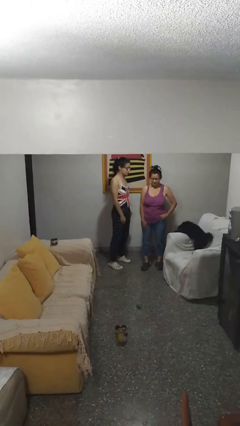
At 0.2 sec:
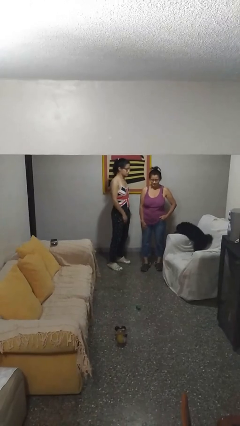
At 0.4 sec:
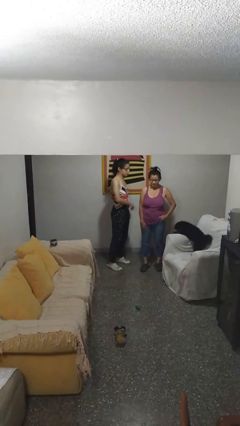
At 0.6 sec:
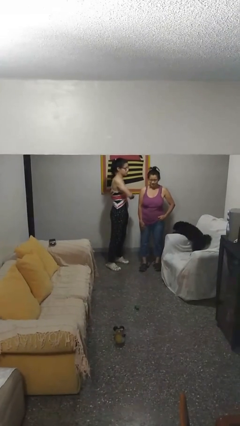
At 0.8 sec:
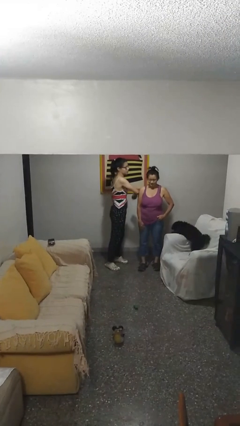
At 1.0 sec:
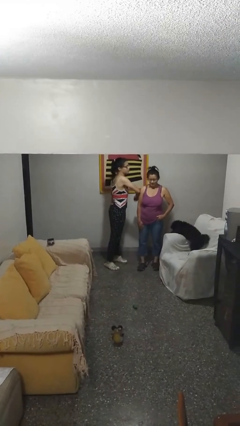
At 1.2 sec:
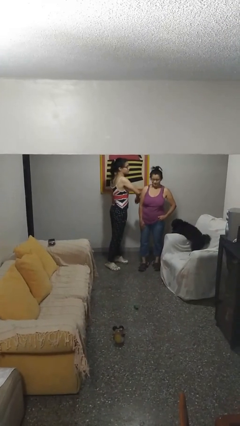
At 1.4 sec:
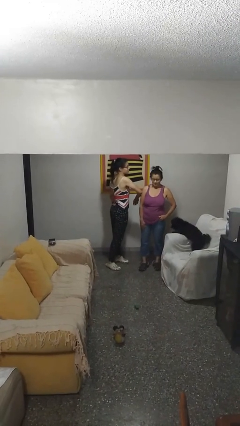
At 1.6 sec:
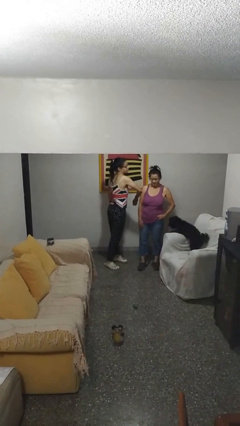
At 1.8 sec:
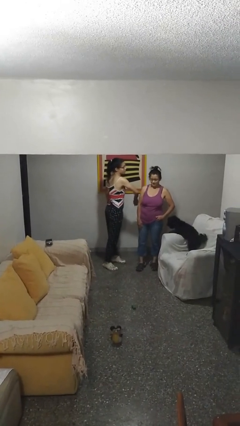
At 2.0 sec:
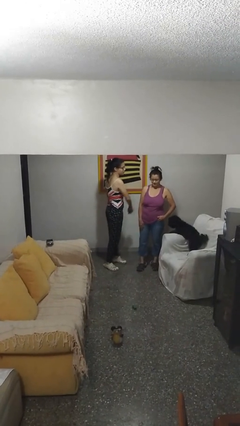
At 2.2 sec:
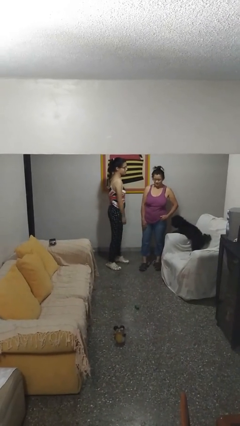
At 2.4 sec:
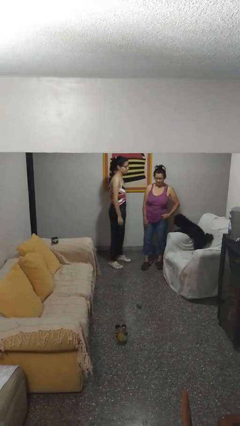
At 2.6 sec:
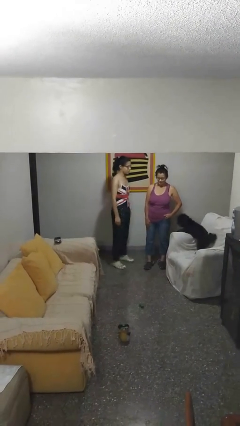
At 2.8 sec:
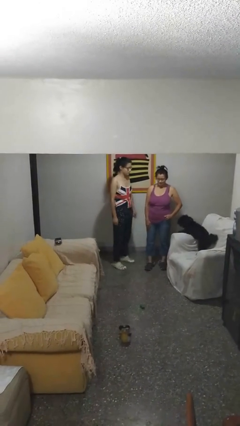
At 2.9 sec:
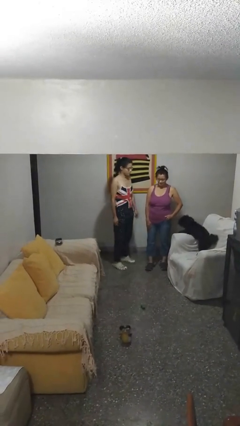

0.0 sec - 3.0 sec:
person nudges person with elbow

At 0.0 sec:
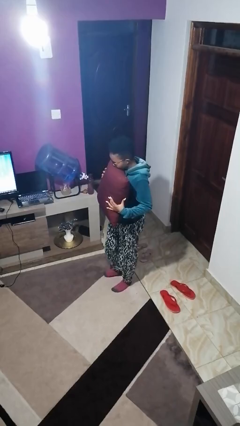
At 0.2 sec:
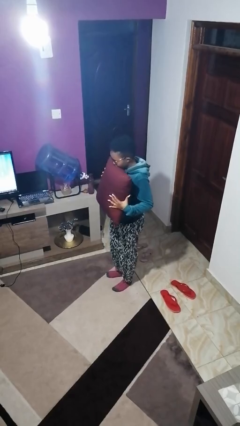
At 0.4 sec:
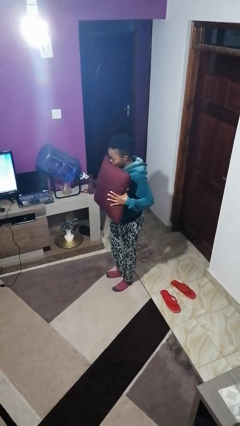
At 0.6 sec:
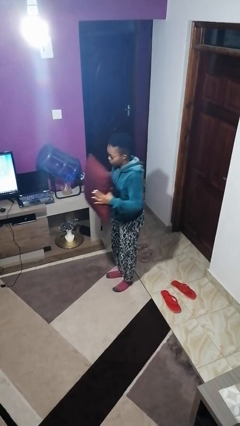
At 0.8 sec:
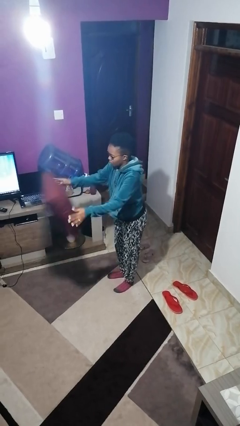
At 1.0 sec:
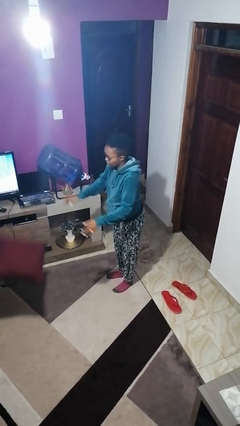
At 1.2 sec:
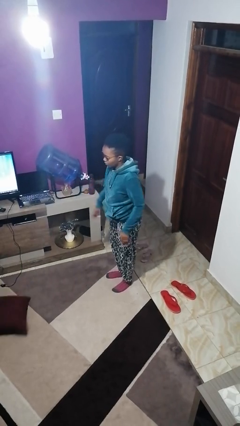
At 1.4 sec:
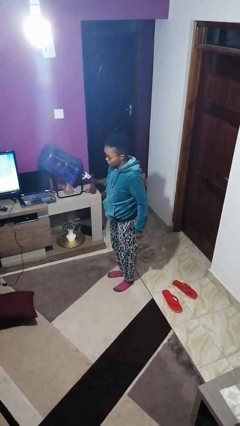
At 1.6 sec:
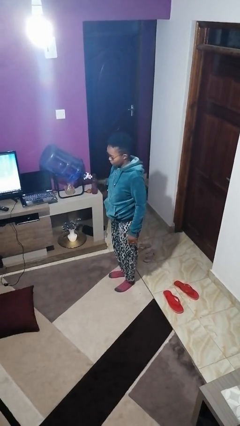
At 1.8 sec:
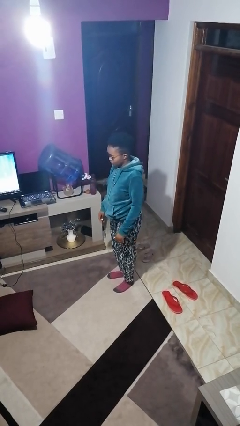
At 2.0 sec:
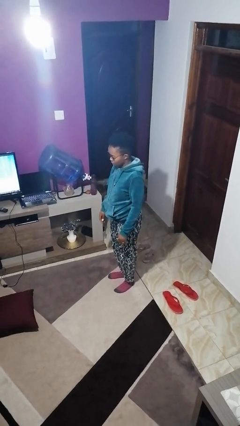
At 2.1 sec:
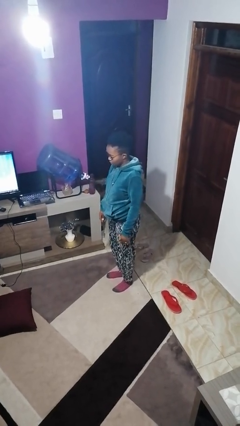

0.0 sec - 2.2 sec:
person throws object to ground

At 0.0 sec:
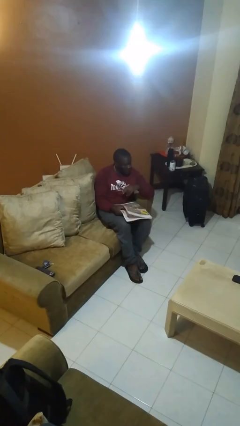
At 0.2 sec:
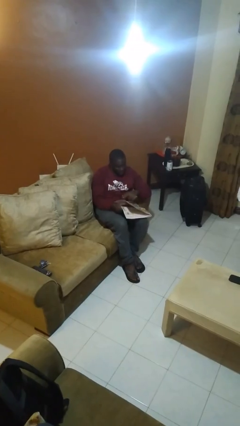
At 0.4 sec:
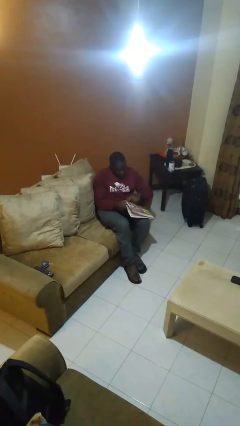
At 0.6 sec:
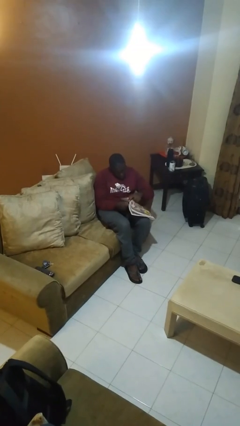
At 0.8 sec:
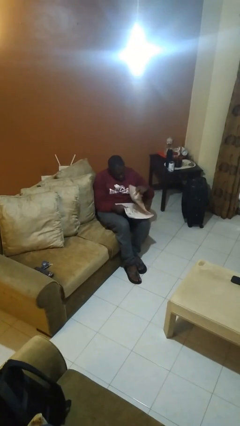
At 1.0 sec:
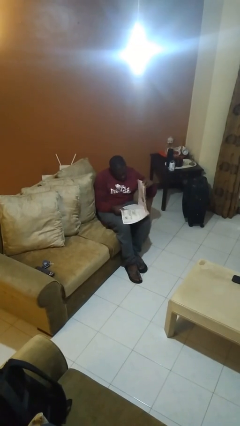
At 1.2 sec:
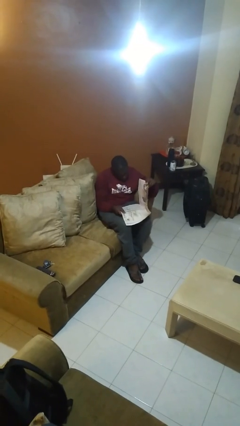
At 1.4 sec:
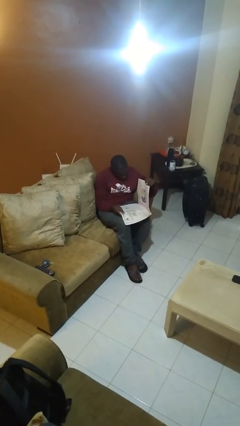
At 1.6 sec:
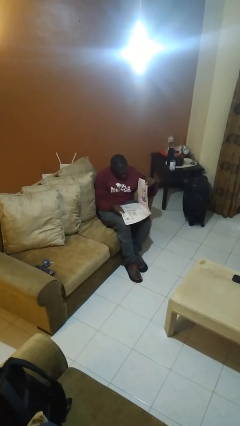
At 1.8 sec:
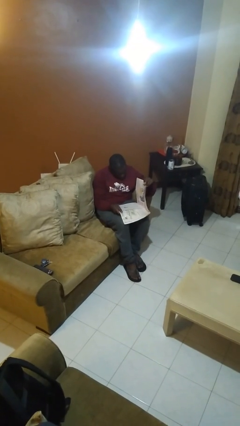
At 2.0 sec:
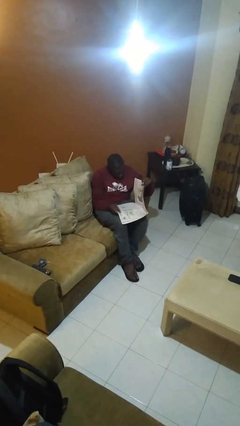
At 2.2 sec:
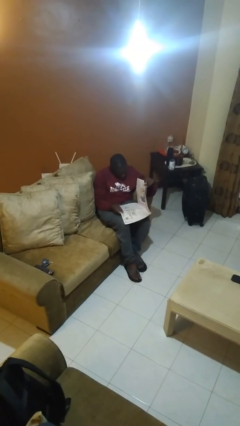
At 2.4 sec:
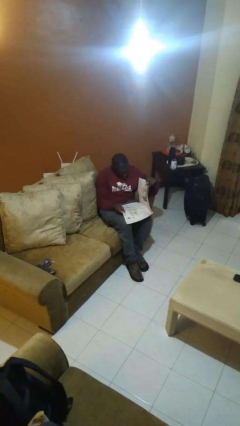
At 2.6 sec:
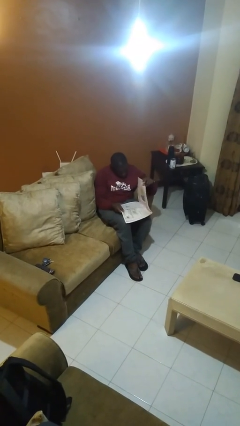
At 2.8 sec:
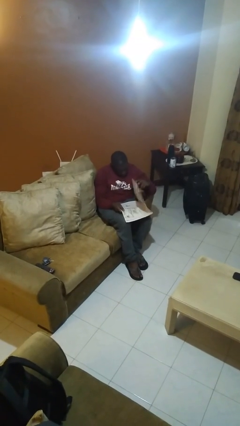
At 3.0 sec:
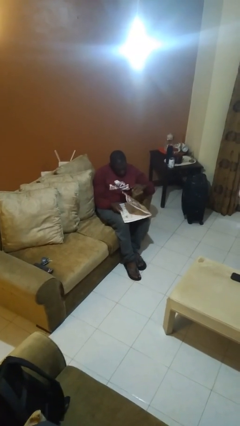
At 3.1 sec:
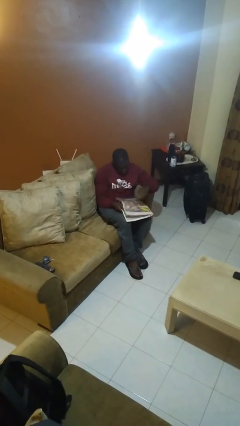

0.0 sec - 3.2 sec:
person reads newspaper

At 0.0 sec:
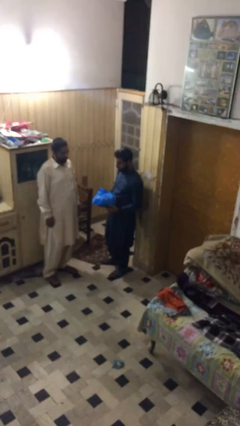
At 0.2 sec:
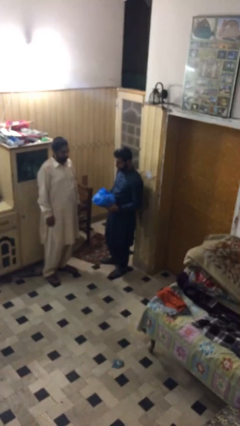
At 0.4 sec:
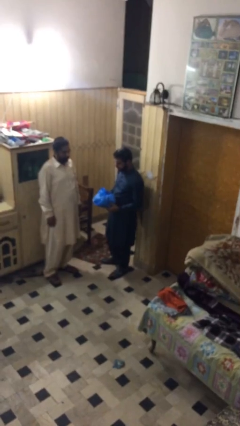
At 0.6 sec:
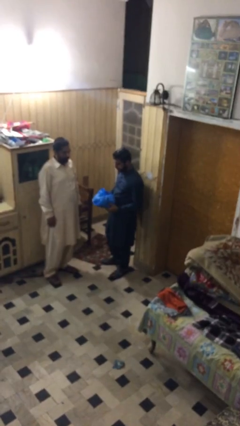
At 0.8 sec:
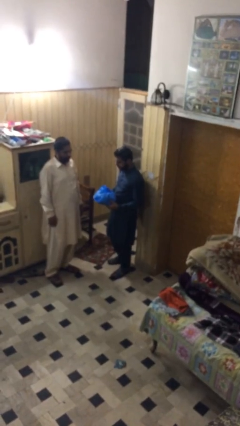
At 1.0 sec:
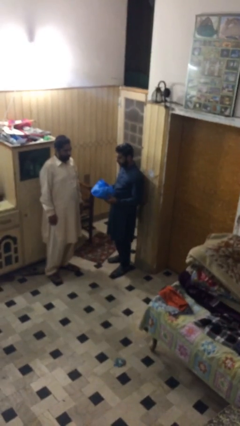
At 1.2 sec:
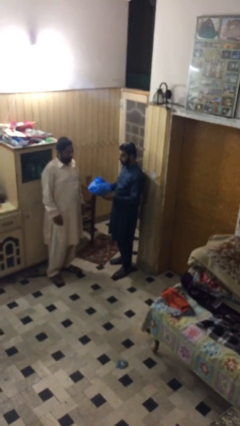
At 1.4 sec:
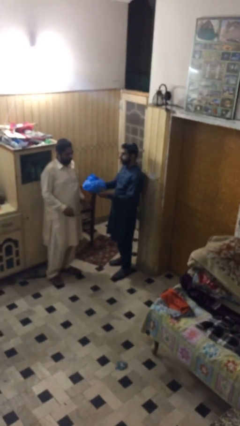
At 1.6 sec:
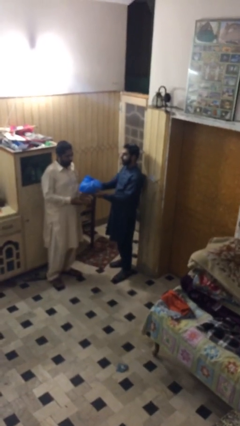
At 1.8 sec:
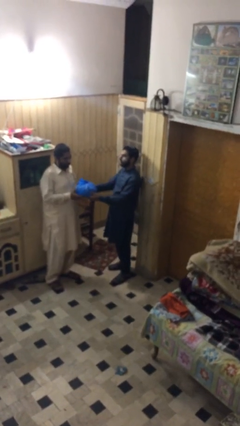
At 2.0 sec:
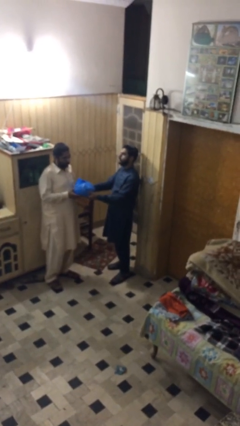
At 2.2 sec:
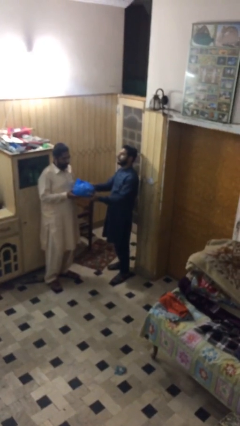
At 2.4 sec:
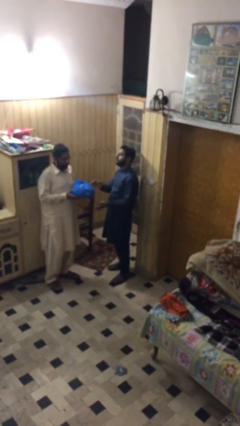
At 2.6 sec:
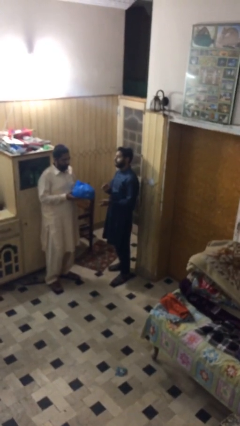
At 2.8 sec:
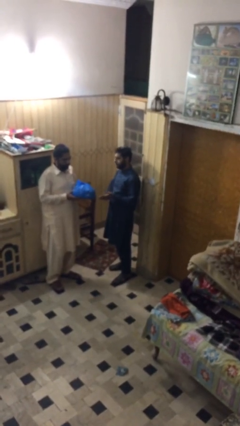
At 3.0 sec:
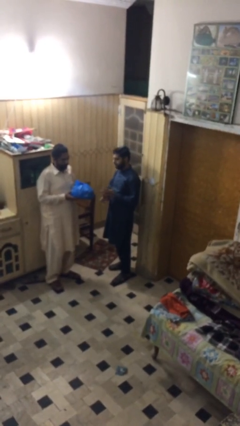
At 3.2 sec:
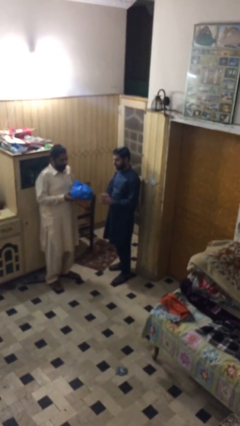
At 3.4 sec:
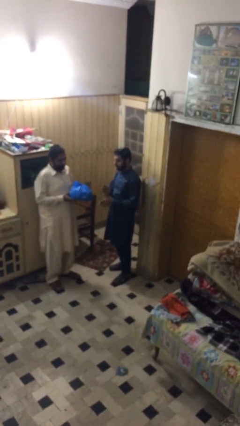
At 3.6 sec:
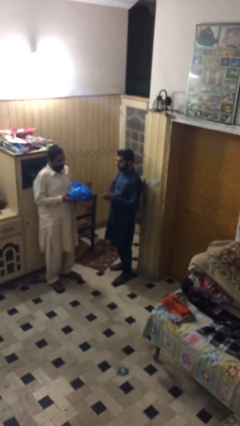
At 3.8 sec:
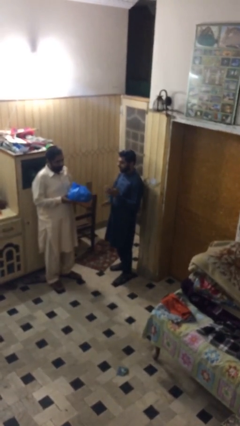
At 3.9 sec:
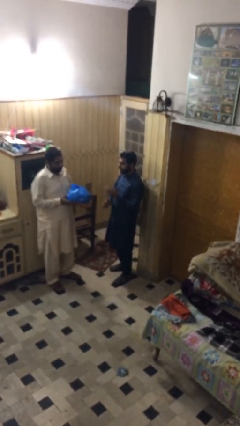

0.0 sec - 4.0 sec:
person transfers object to person

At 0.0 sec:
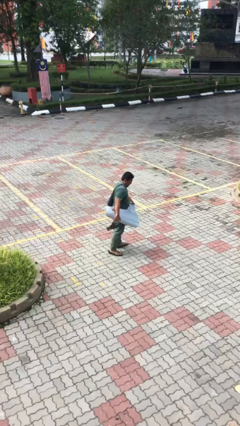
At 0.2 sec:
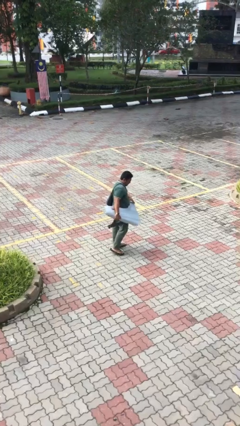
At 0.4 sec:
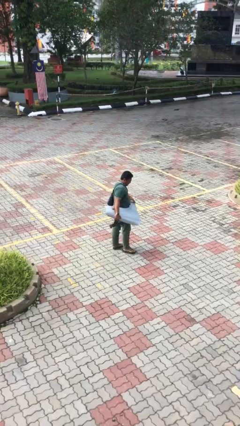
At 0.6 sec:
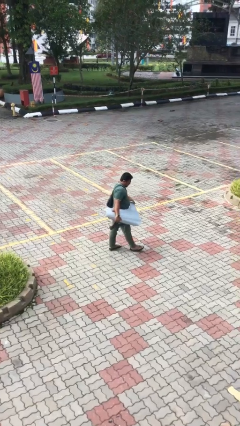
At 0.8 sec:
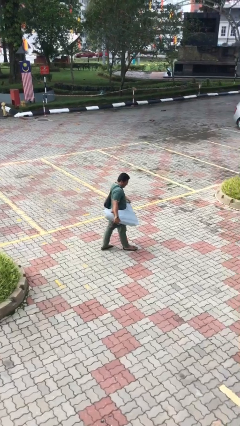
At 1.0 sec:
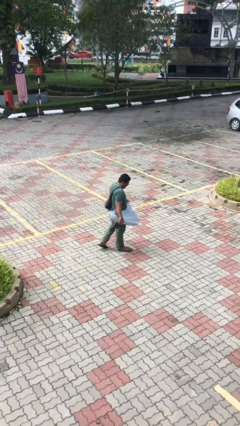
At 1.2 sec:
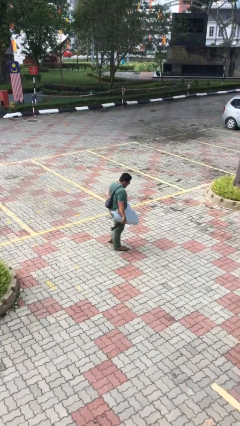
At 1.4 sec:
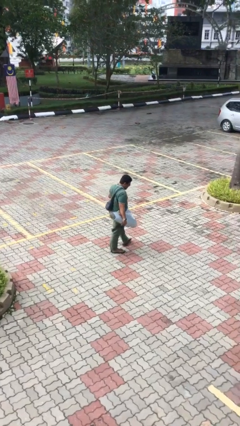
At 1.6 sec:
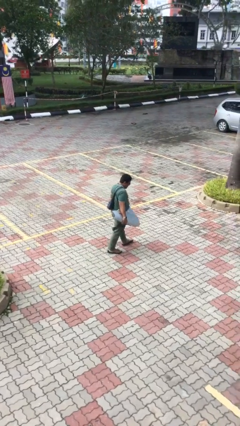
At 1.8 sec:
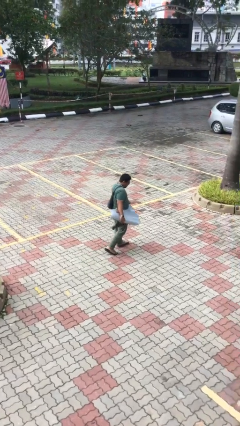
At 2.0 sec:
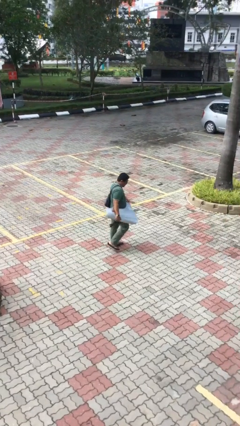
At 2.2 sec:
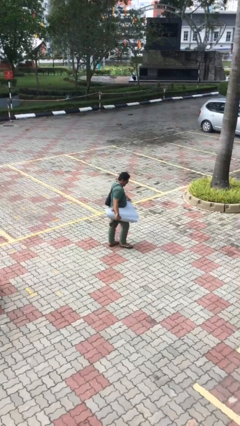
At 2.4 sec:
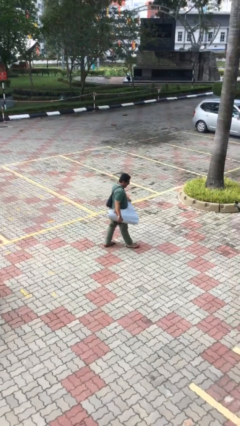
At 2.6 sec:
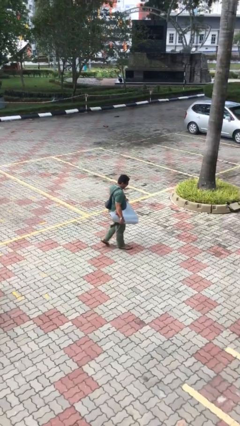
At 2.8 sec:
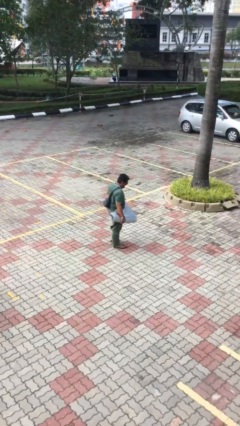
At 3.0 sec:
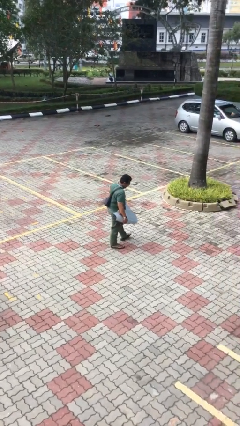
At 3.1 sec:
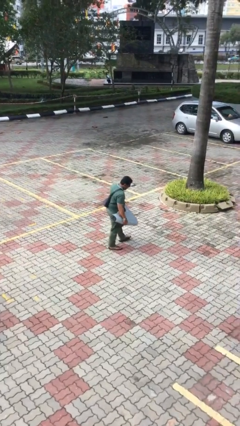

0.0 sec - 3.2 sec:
person carries heavy object

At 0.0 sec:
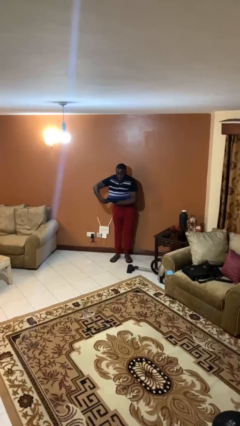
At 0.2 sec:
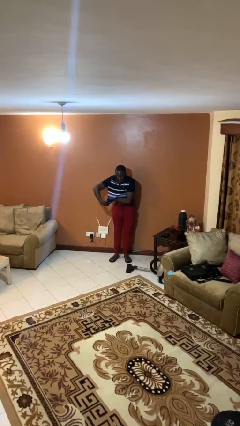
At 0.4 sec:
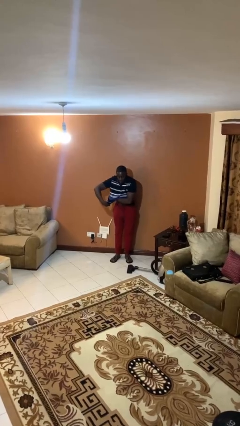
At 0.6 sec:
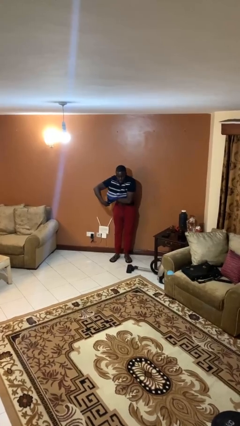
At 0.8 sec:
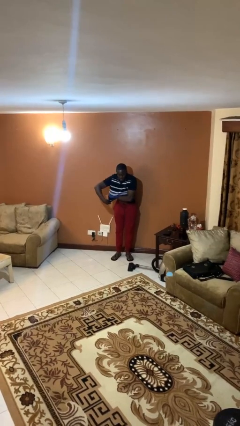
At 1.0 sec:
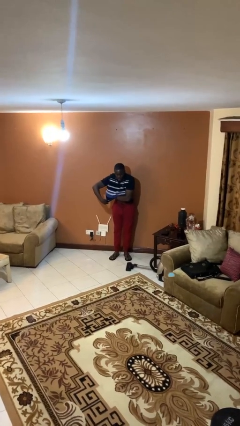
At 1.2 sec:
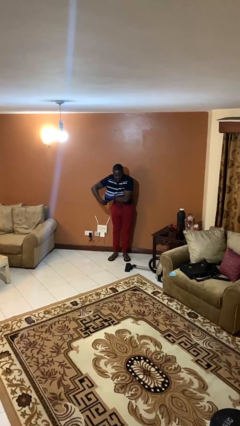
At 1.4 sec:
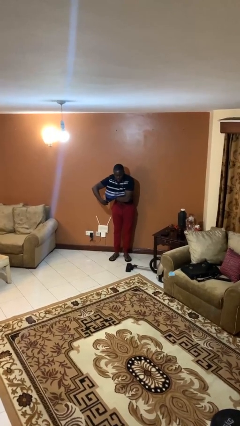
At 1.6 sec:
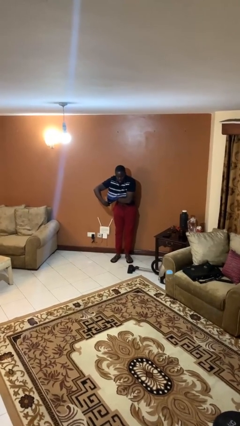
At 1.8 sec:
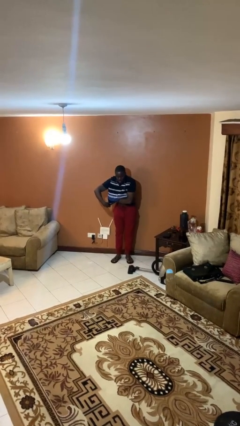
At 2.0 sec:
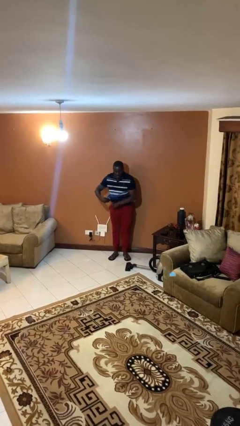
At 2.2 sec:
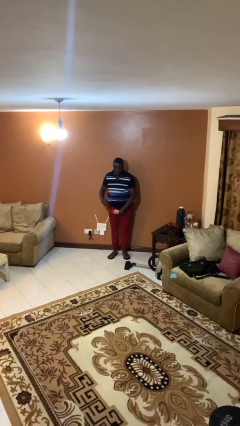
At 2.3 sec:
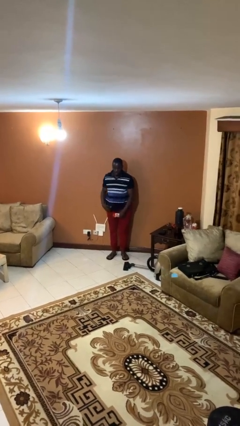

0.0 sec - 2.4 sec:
person applies deodorant
